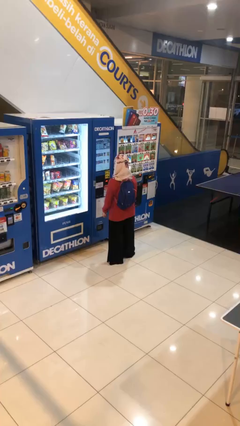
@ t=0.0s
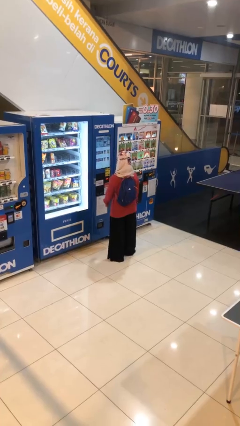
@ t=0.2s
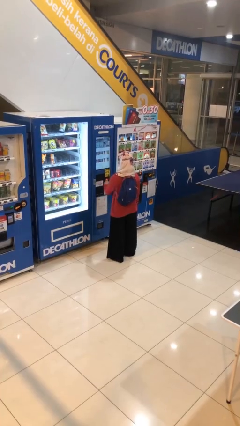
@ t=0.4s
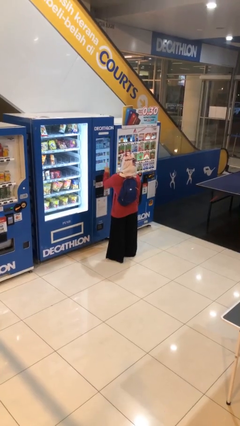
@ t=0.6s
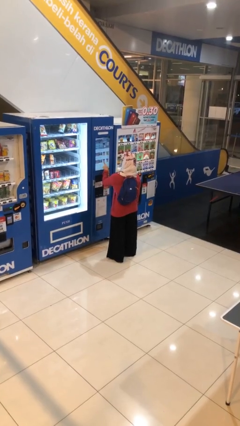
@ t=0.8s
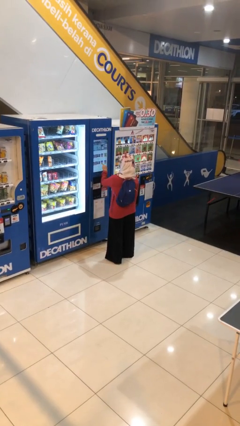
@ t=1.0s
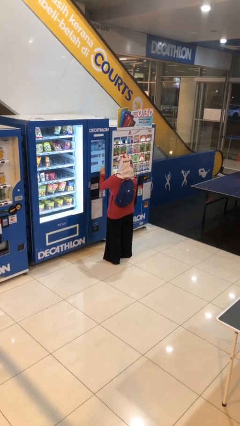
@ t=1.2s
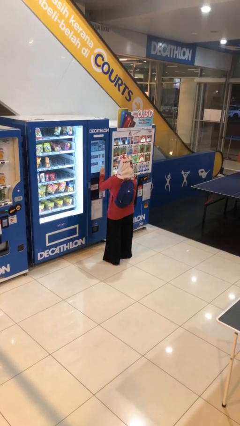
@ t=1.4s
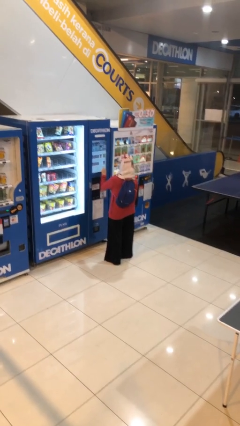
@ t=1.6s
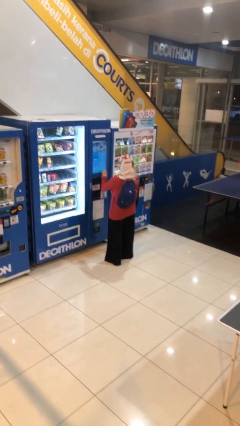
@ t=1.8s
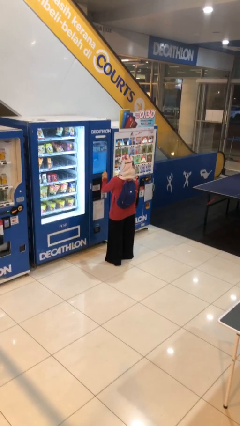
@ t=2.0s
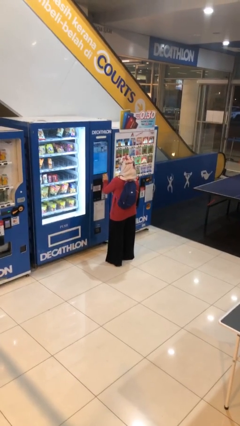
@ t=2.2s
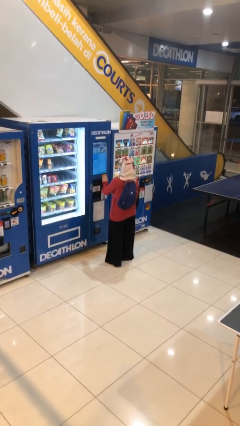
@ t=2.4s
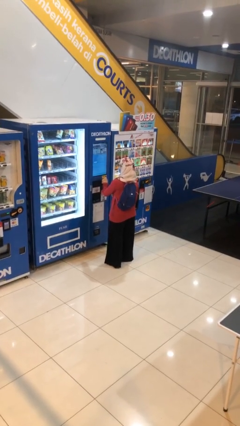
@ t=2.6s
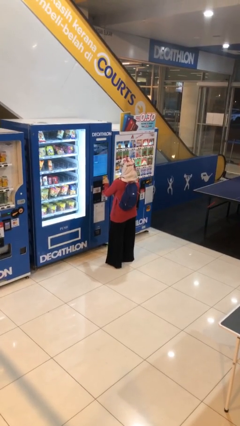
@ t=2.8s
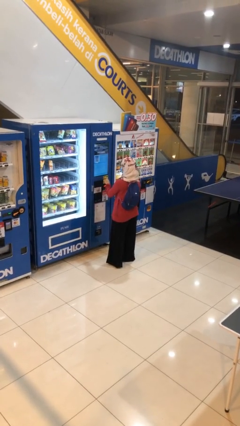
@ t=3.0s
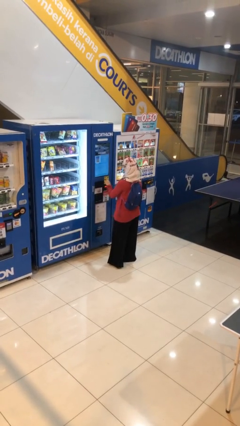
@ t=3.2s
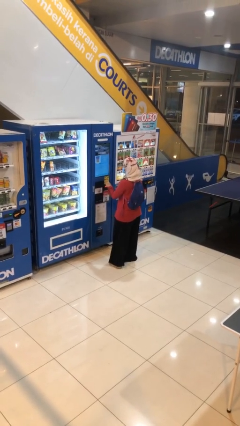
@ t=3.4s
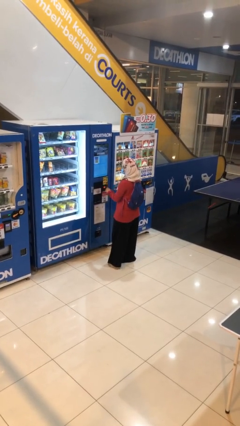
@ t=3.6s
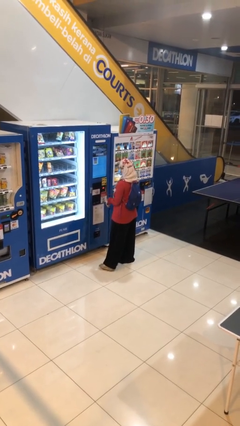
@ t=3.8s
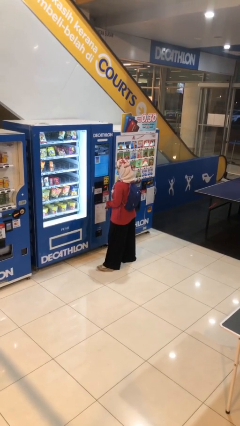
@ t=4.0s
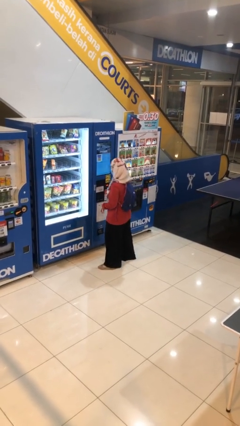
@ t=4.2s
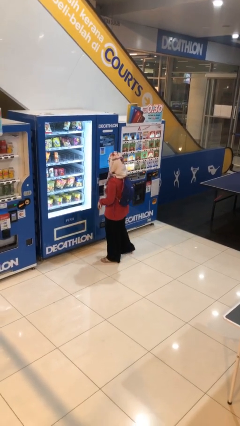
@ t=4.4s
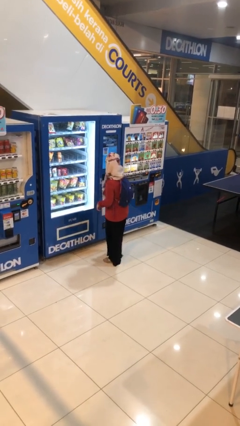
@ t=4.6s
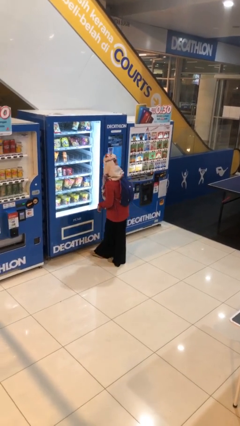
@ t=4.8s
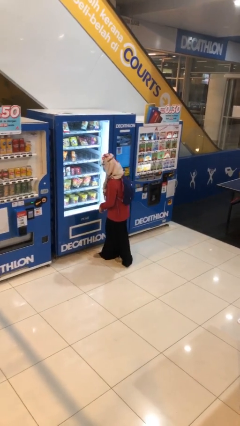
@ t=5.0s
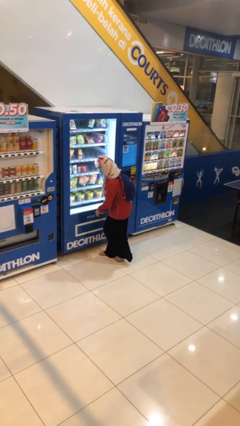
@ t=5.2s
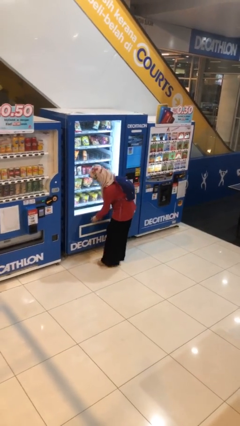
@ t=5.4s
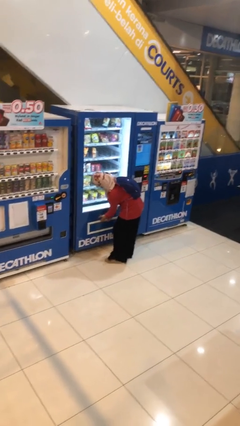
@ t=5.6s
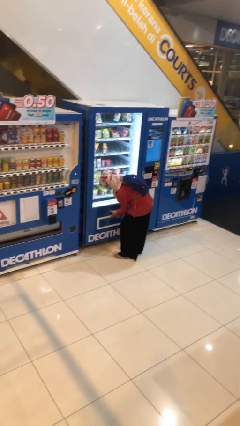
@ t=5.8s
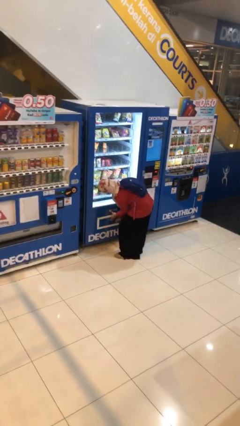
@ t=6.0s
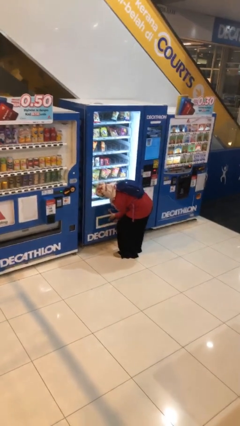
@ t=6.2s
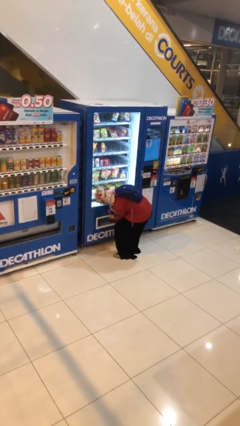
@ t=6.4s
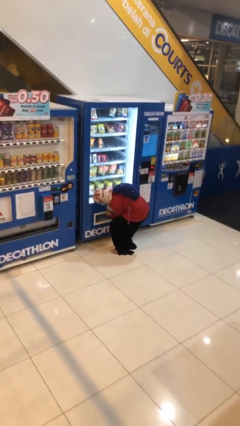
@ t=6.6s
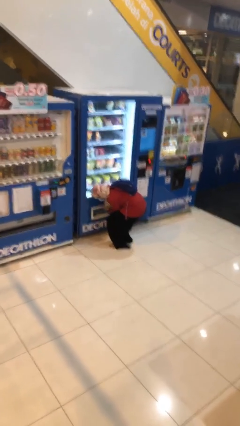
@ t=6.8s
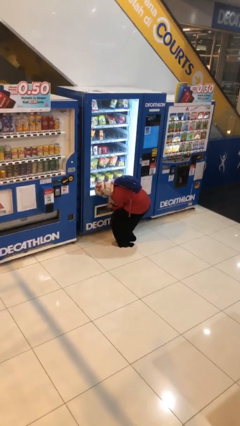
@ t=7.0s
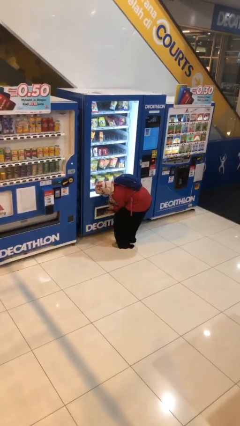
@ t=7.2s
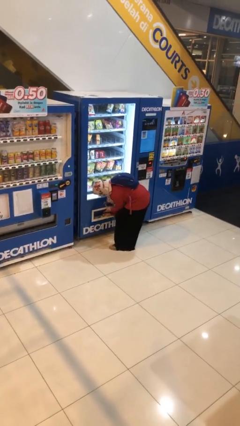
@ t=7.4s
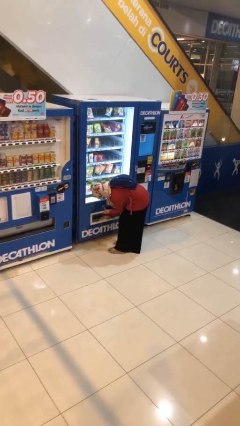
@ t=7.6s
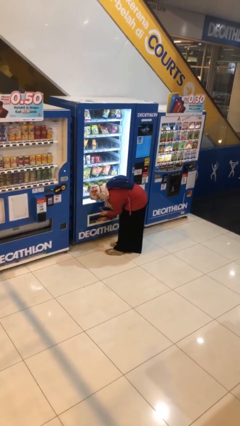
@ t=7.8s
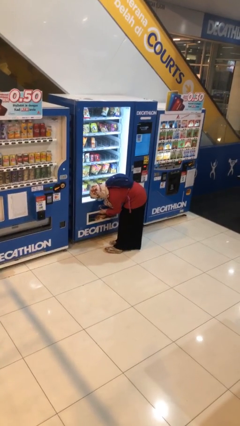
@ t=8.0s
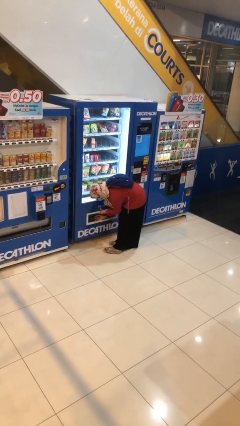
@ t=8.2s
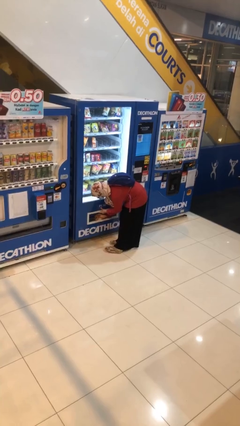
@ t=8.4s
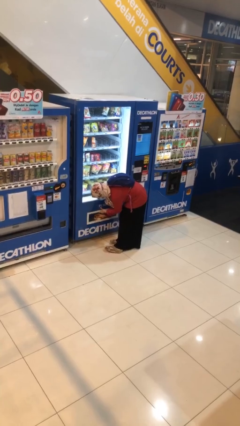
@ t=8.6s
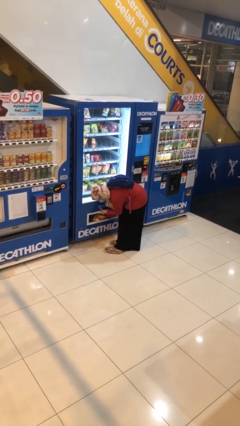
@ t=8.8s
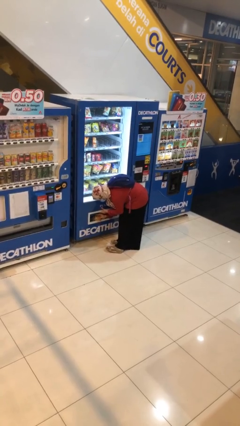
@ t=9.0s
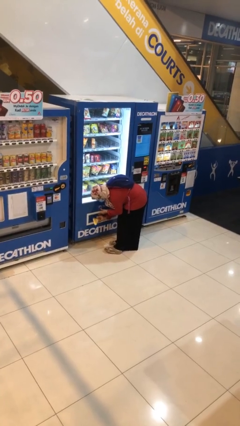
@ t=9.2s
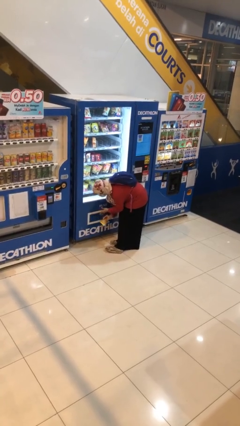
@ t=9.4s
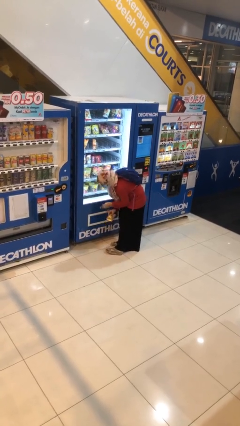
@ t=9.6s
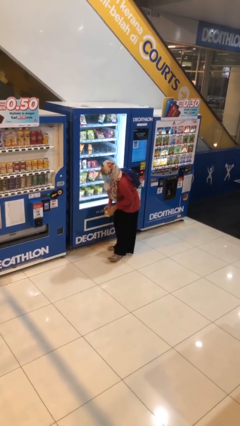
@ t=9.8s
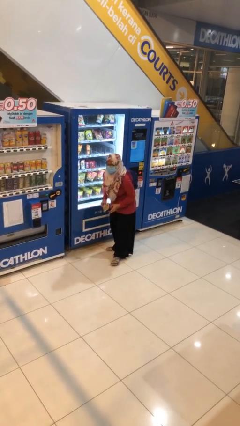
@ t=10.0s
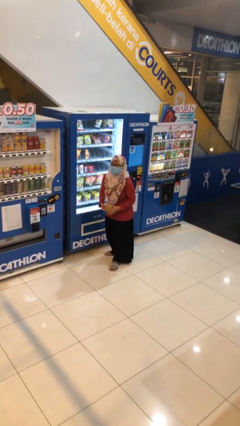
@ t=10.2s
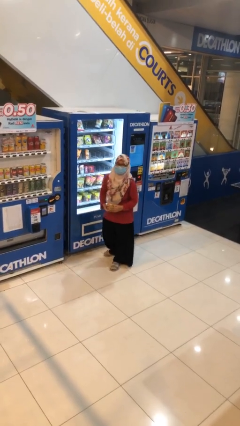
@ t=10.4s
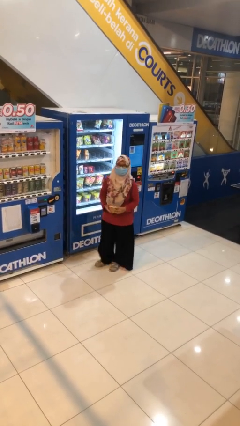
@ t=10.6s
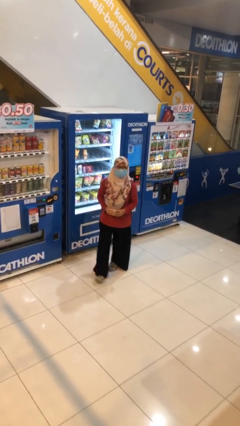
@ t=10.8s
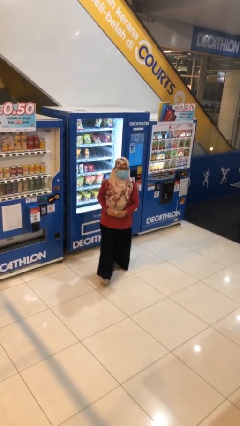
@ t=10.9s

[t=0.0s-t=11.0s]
person purchases from machine

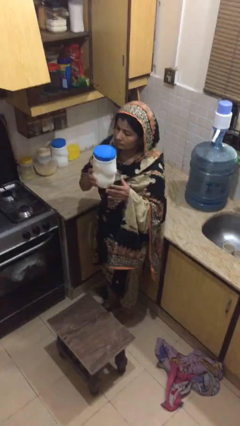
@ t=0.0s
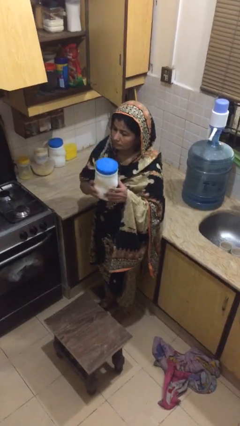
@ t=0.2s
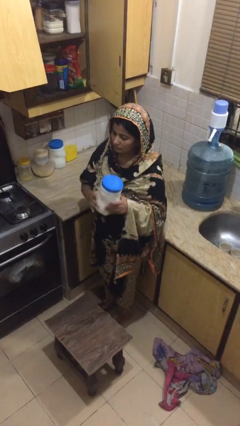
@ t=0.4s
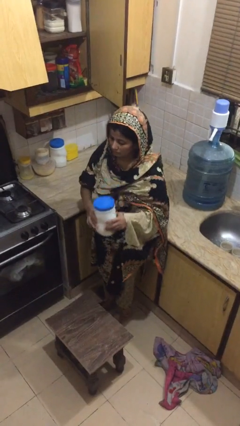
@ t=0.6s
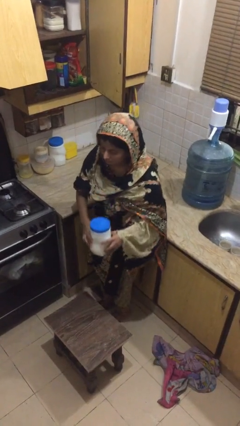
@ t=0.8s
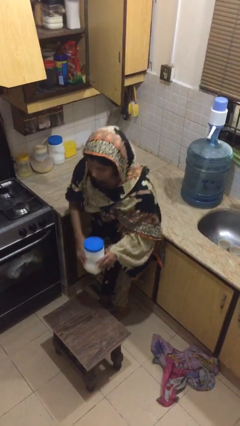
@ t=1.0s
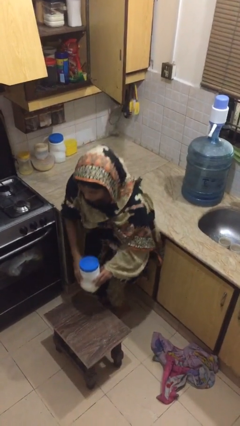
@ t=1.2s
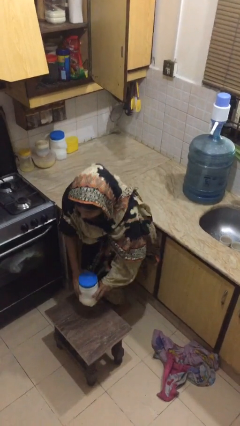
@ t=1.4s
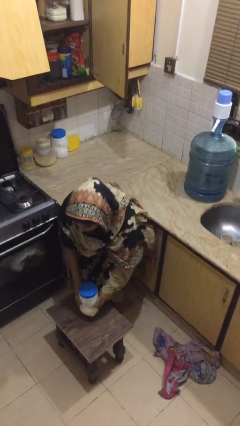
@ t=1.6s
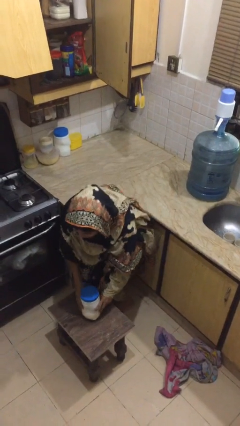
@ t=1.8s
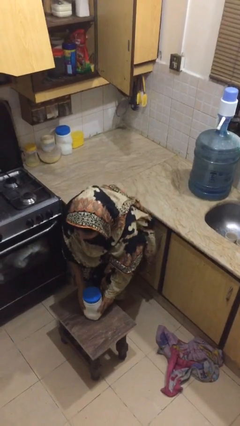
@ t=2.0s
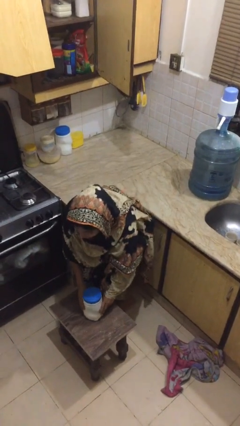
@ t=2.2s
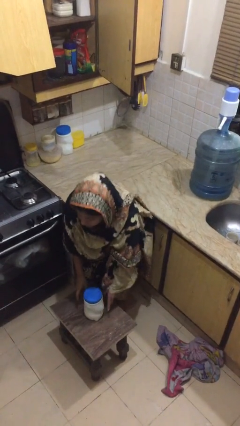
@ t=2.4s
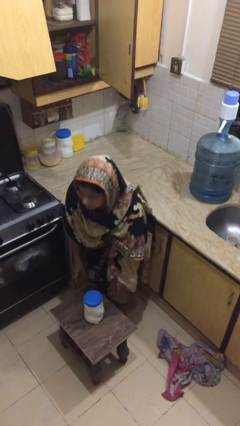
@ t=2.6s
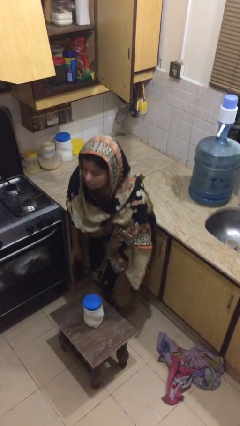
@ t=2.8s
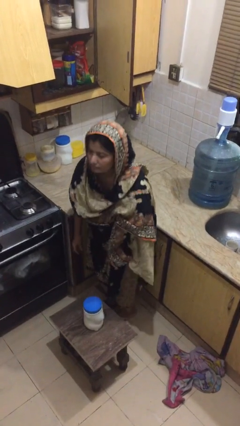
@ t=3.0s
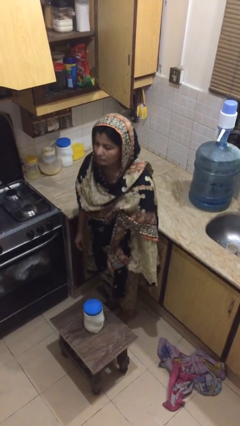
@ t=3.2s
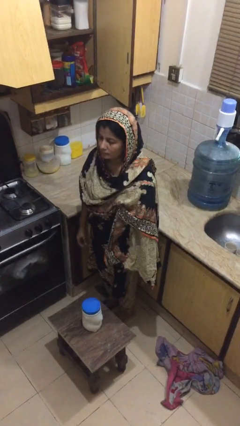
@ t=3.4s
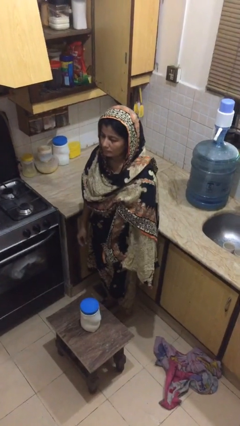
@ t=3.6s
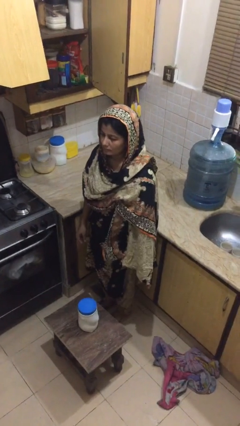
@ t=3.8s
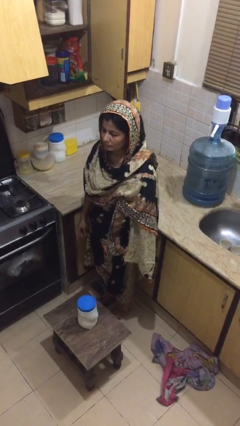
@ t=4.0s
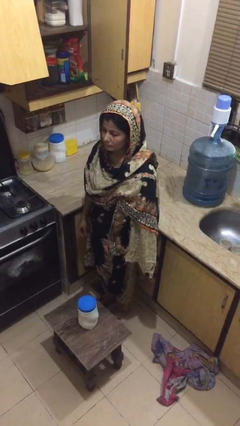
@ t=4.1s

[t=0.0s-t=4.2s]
person puts down object on table

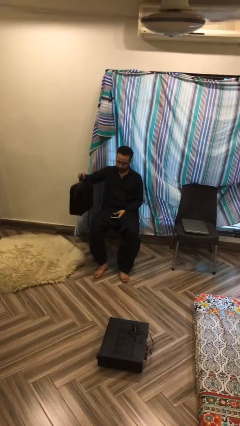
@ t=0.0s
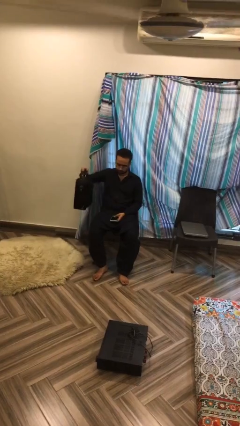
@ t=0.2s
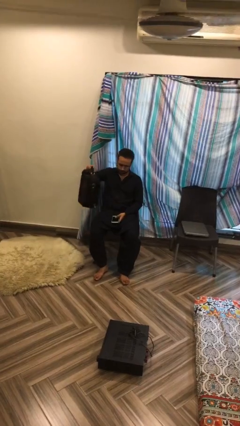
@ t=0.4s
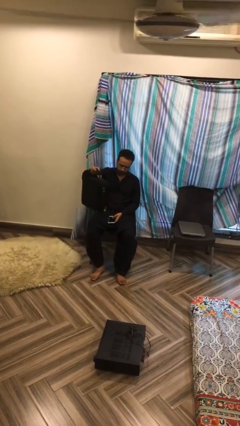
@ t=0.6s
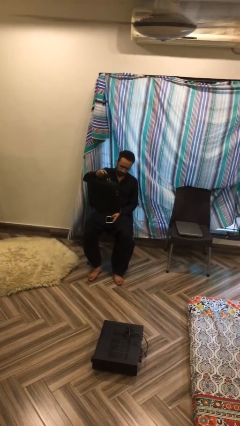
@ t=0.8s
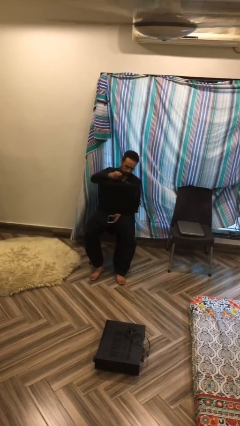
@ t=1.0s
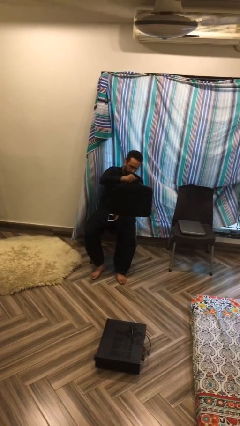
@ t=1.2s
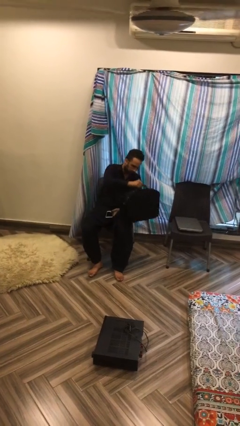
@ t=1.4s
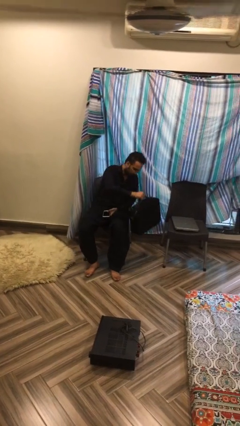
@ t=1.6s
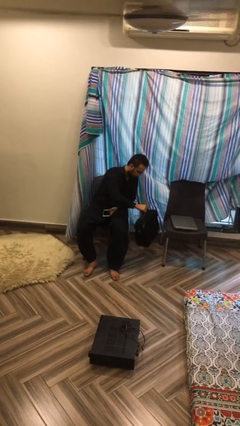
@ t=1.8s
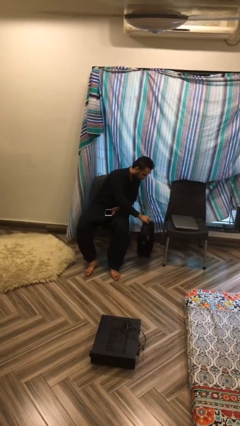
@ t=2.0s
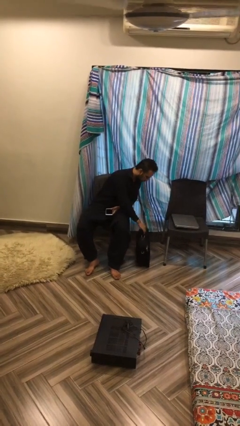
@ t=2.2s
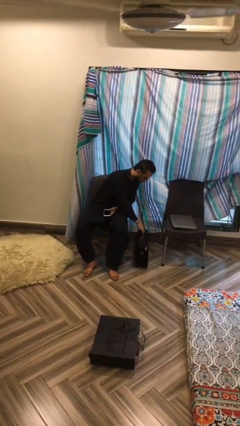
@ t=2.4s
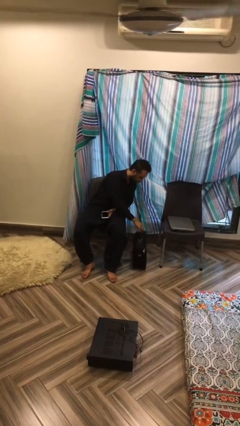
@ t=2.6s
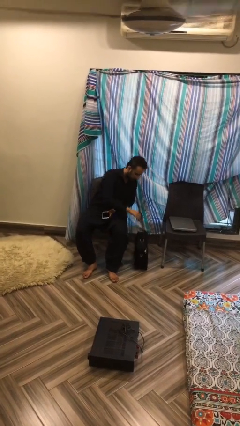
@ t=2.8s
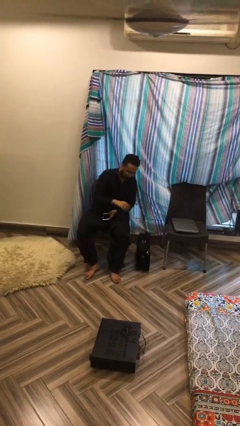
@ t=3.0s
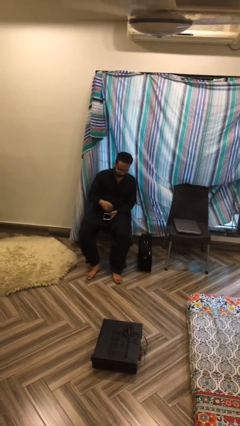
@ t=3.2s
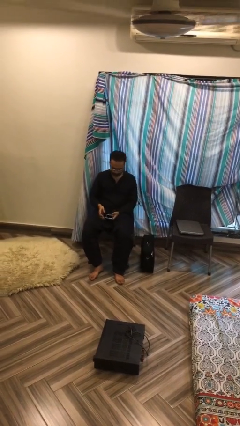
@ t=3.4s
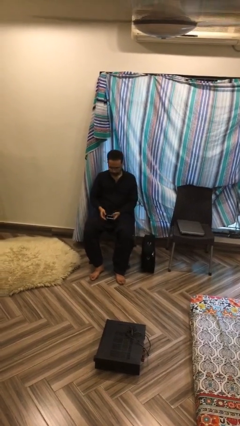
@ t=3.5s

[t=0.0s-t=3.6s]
person puts down object on floor
